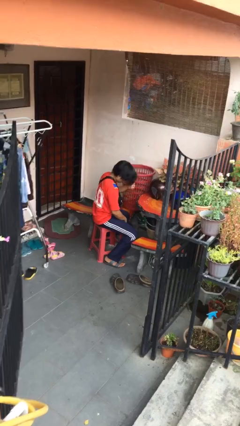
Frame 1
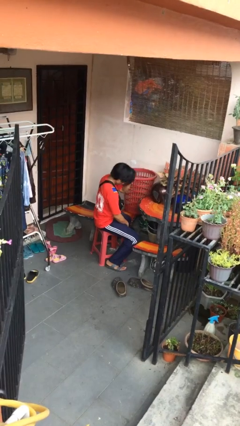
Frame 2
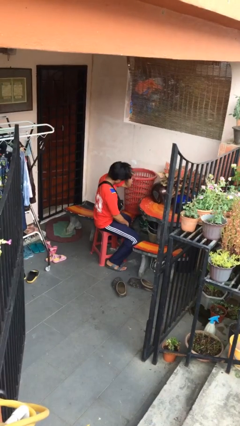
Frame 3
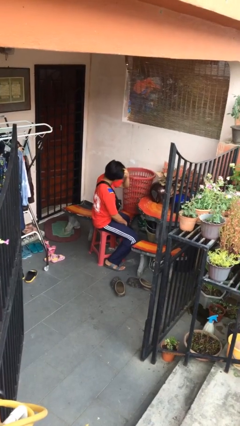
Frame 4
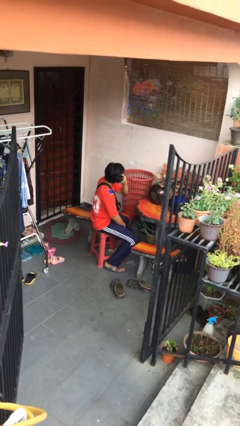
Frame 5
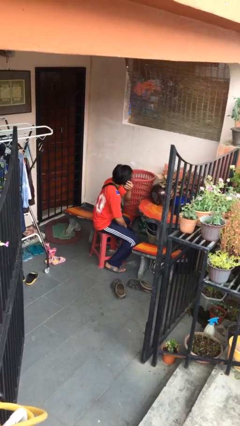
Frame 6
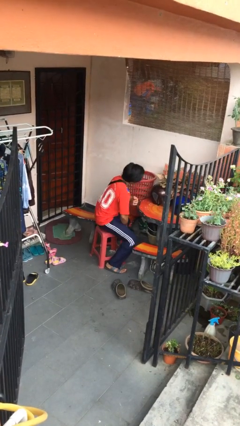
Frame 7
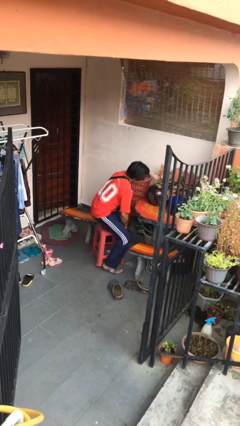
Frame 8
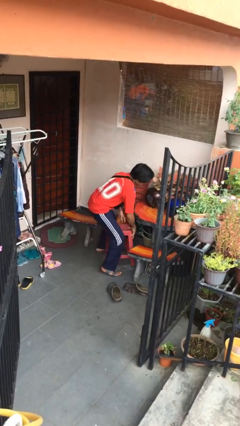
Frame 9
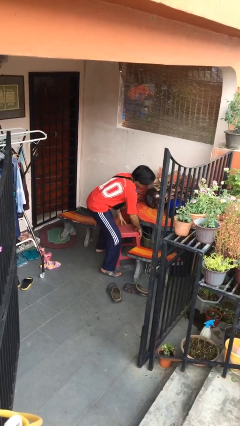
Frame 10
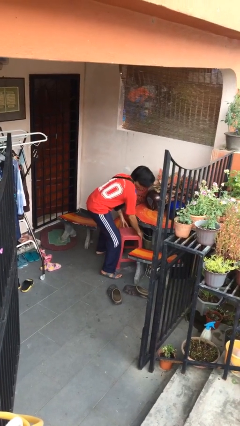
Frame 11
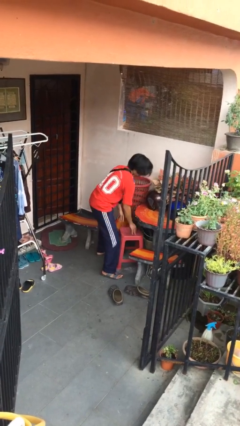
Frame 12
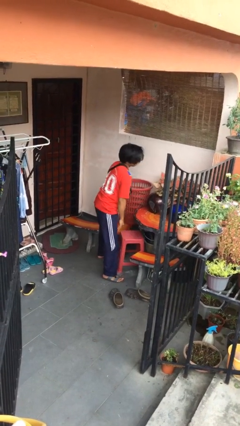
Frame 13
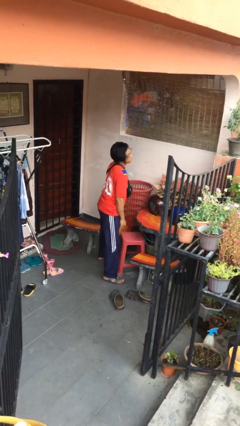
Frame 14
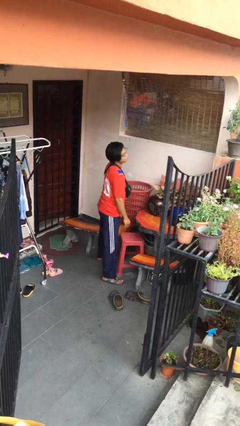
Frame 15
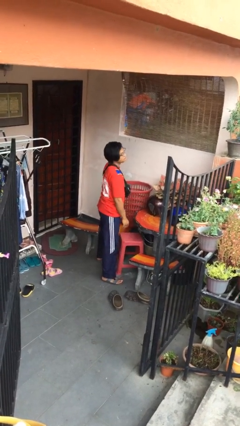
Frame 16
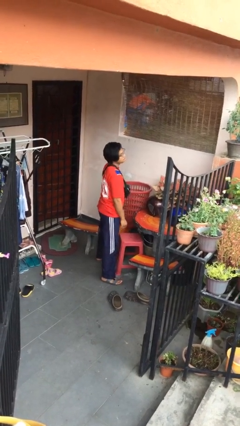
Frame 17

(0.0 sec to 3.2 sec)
person stands up

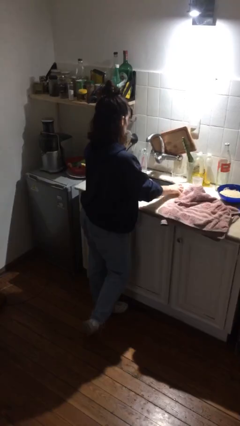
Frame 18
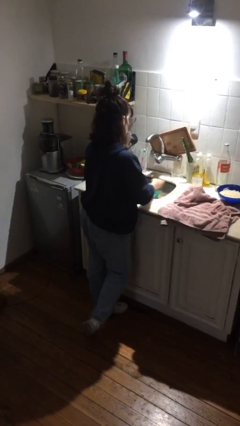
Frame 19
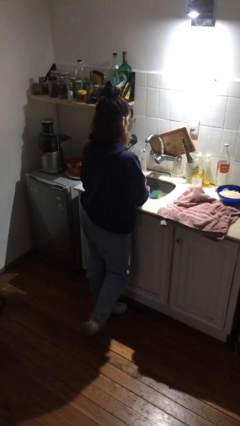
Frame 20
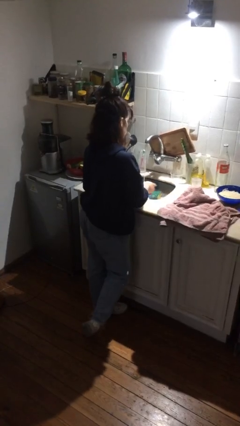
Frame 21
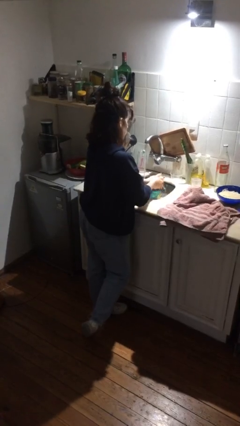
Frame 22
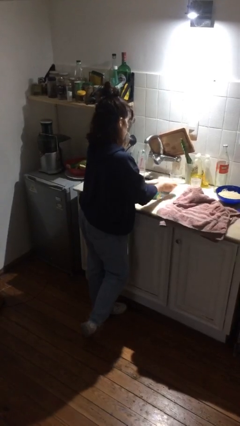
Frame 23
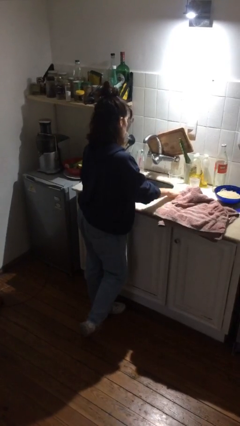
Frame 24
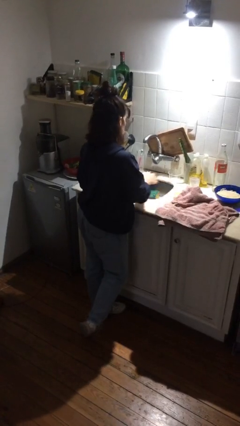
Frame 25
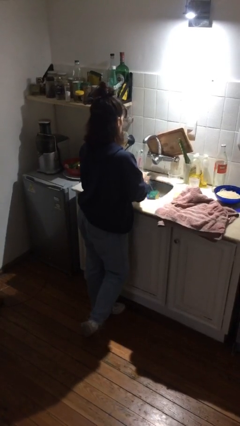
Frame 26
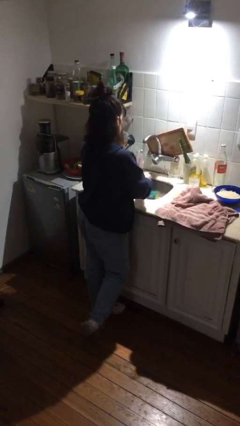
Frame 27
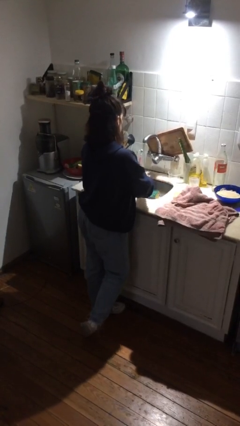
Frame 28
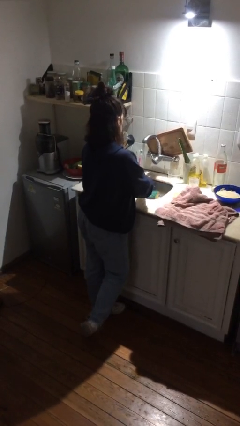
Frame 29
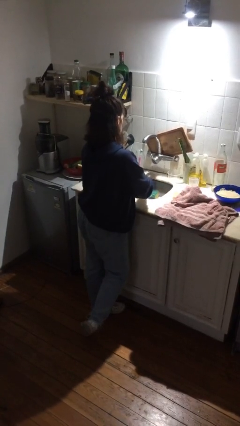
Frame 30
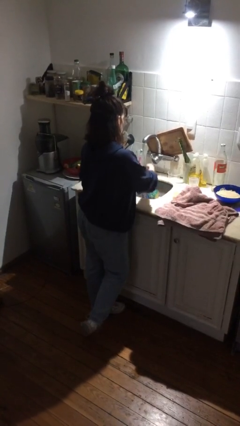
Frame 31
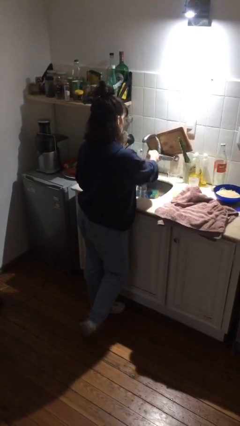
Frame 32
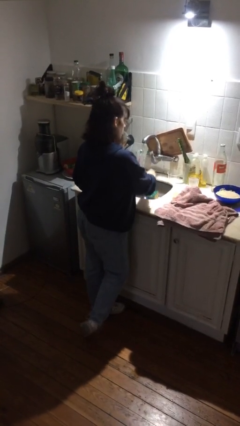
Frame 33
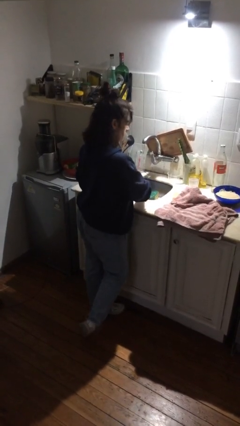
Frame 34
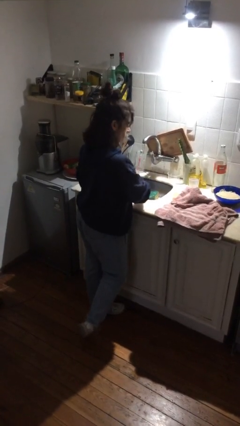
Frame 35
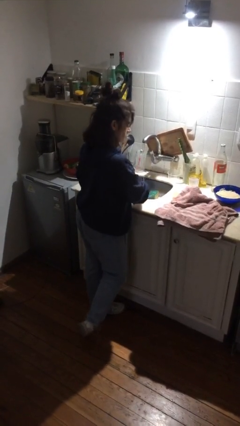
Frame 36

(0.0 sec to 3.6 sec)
person washes hands

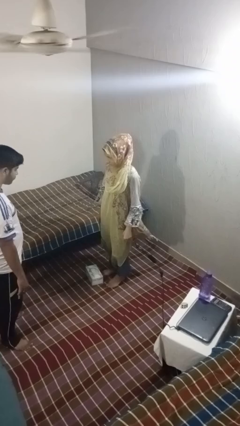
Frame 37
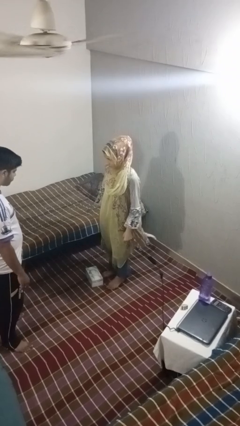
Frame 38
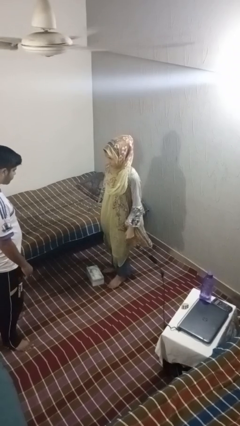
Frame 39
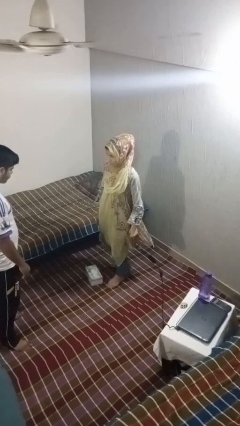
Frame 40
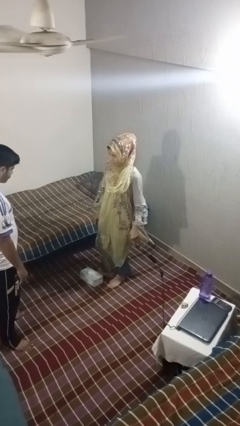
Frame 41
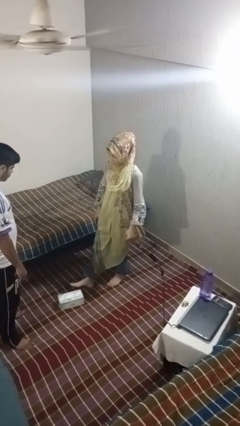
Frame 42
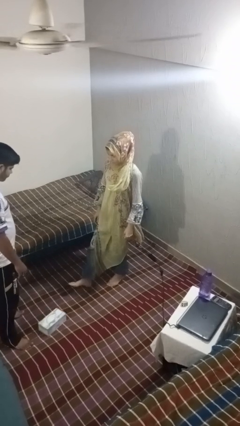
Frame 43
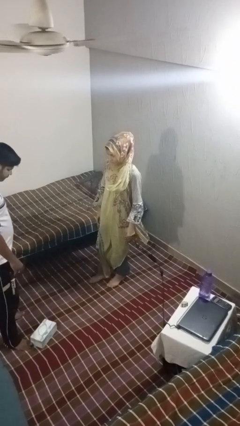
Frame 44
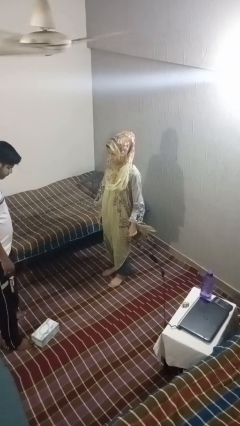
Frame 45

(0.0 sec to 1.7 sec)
person kicks object to person

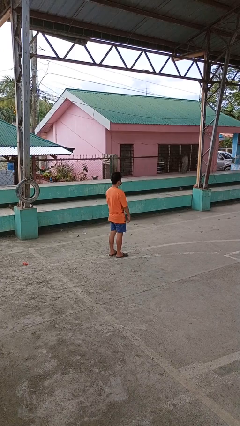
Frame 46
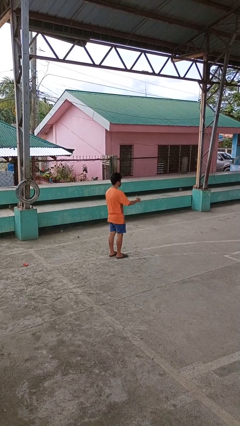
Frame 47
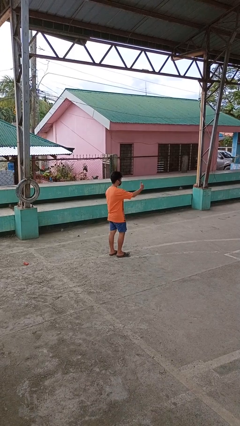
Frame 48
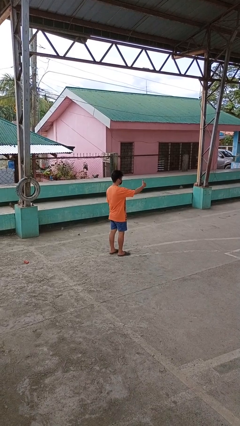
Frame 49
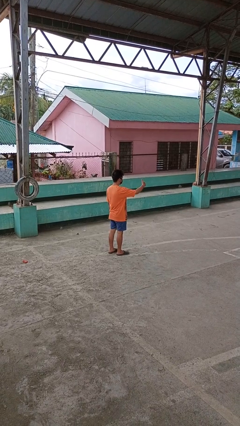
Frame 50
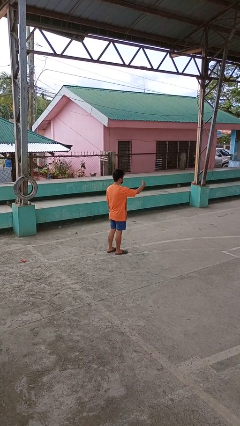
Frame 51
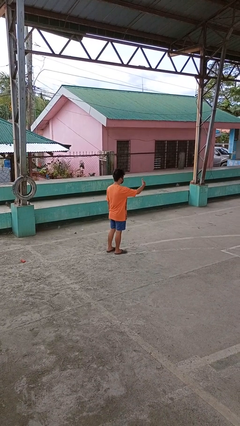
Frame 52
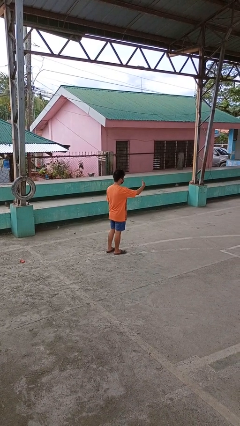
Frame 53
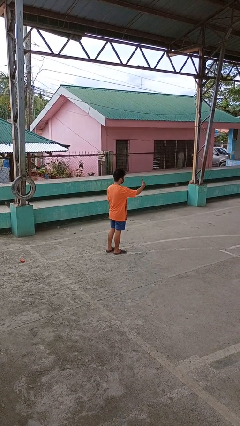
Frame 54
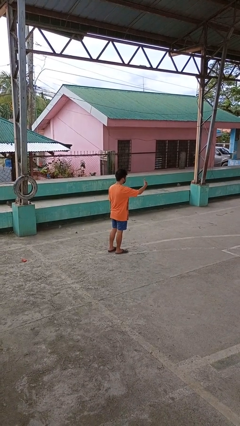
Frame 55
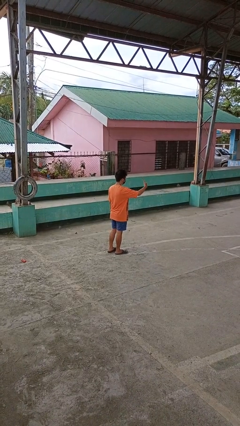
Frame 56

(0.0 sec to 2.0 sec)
person gestures thumbs up

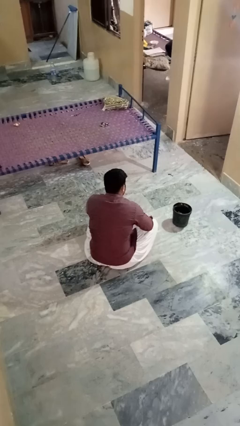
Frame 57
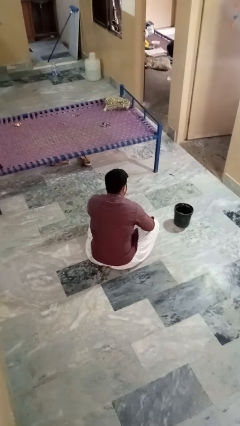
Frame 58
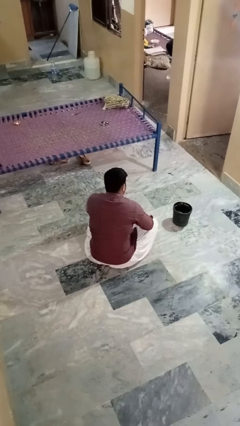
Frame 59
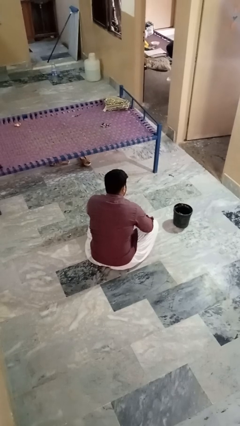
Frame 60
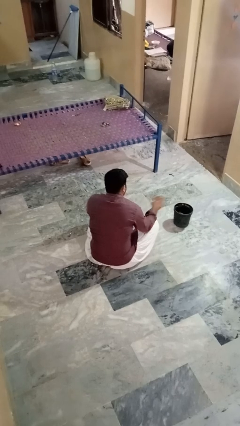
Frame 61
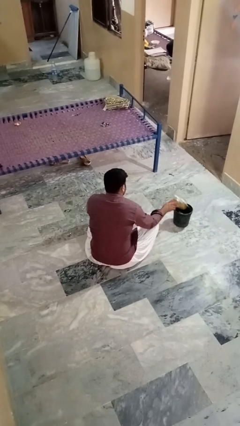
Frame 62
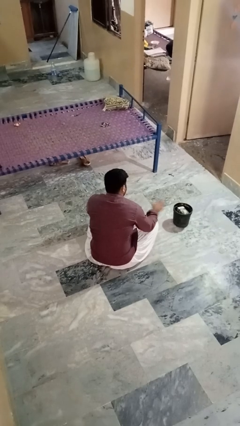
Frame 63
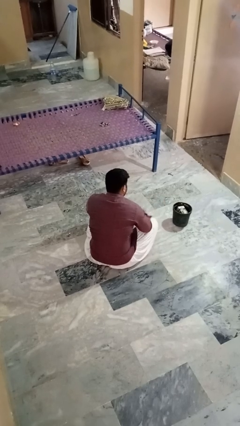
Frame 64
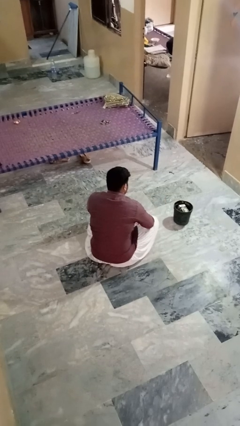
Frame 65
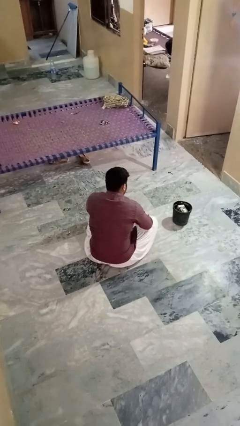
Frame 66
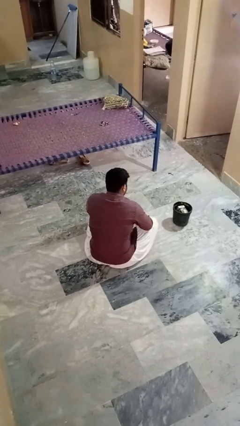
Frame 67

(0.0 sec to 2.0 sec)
person puts object into basket

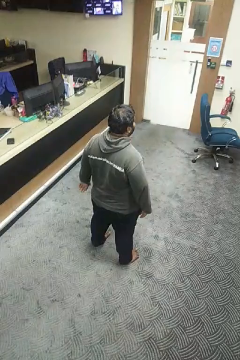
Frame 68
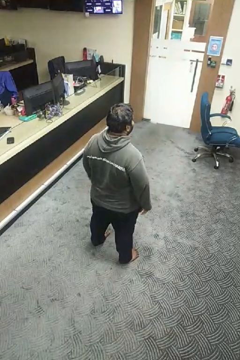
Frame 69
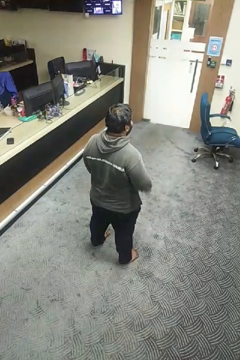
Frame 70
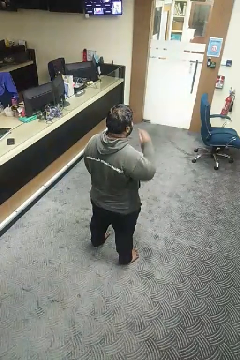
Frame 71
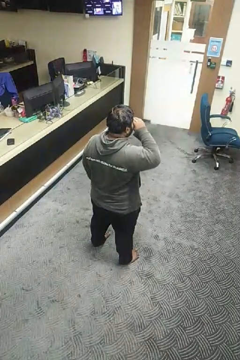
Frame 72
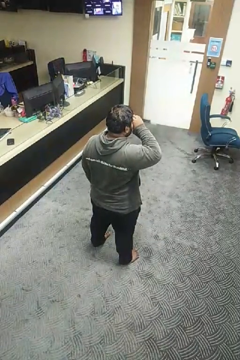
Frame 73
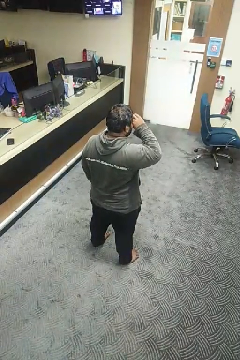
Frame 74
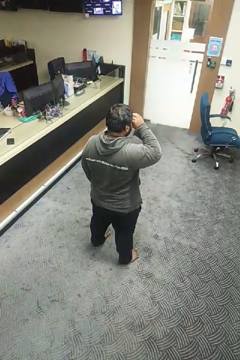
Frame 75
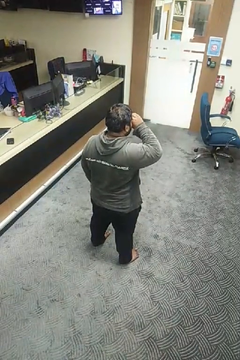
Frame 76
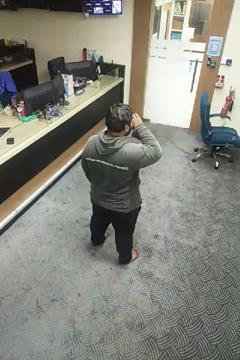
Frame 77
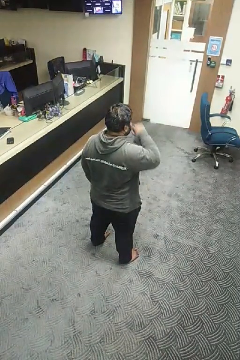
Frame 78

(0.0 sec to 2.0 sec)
person rubs eyes

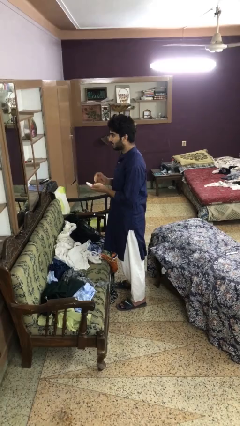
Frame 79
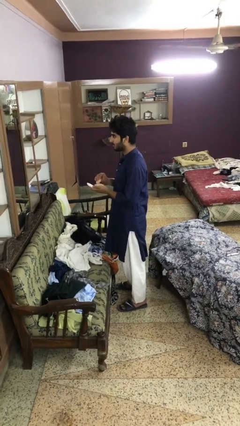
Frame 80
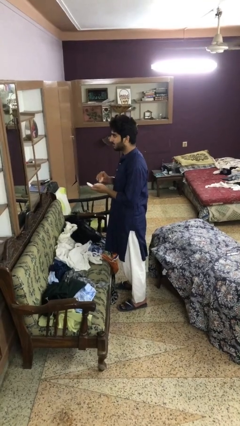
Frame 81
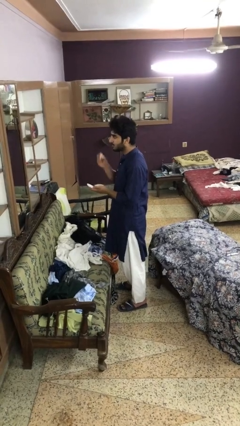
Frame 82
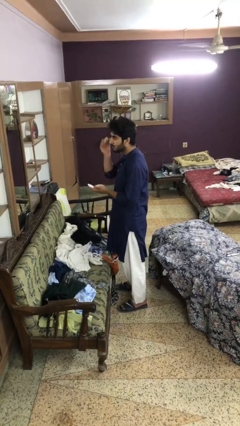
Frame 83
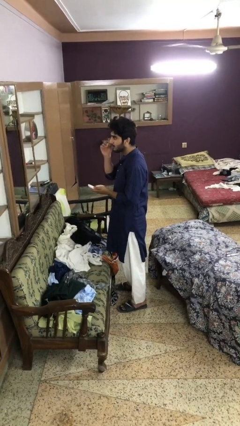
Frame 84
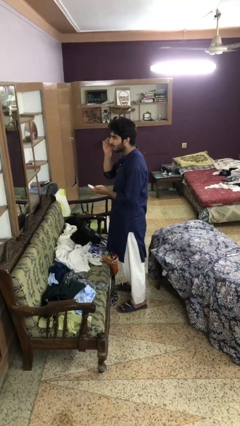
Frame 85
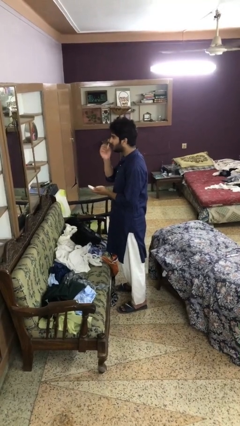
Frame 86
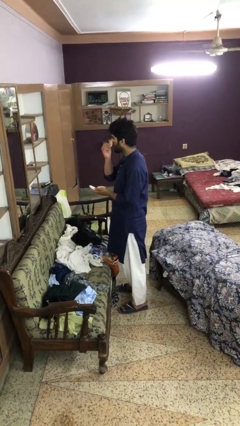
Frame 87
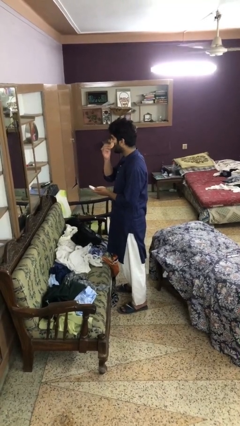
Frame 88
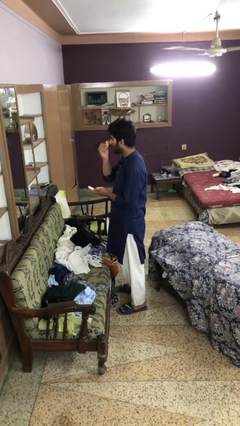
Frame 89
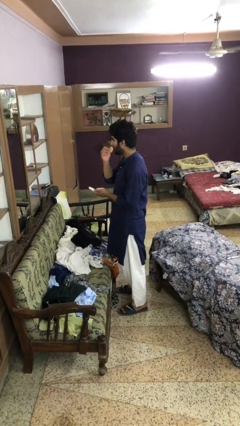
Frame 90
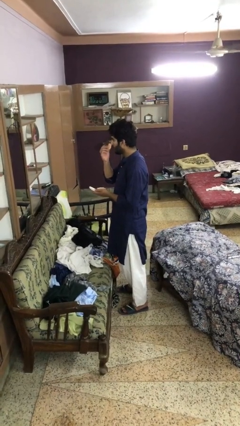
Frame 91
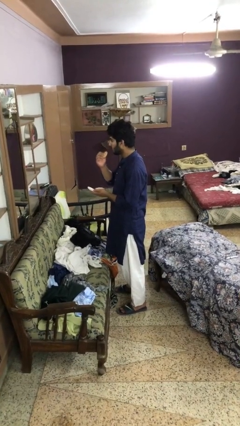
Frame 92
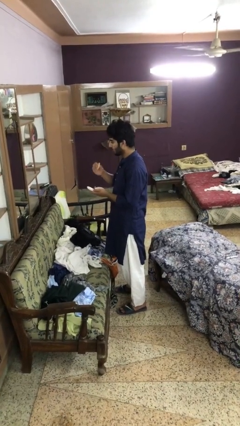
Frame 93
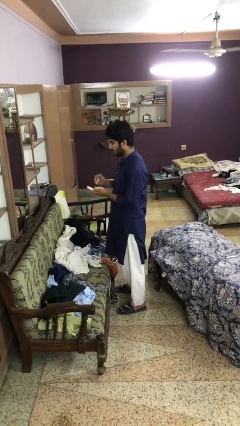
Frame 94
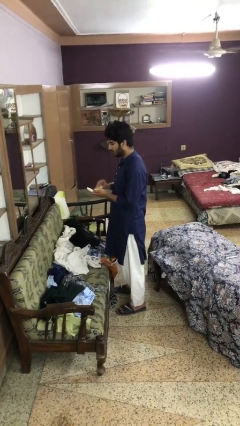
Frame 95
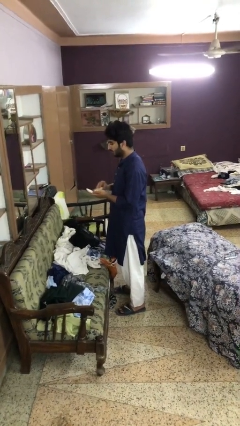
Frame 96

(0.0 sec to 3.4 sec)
person applies foundation makeup
